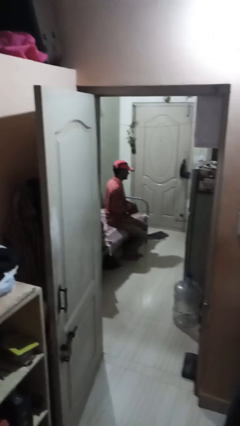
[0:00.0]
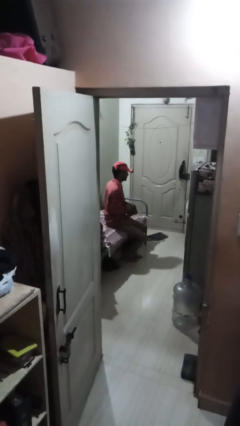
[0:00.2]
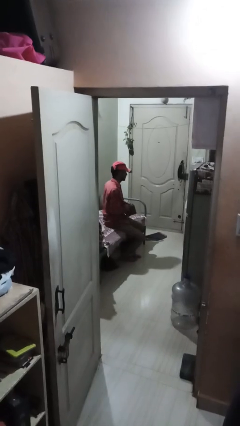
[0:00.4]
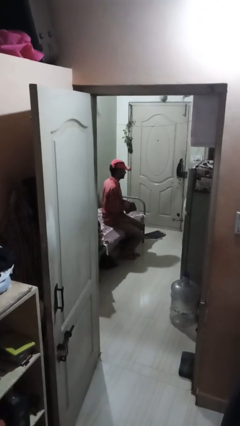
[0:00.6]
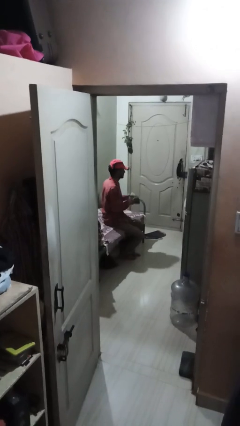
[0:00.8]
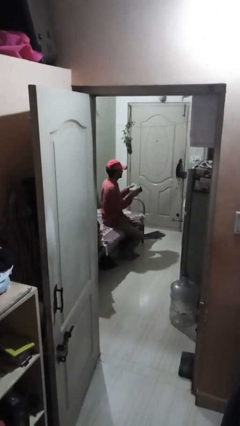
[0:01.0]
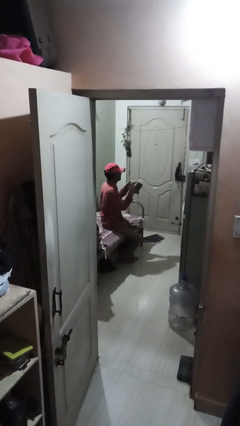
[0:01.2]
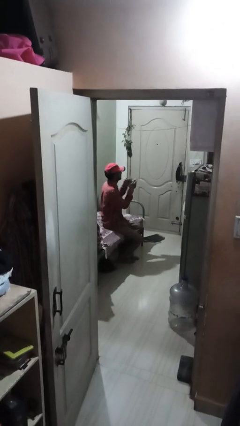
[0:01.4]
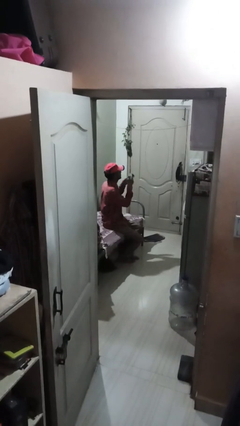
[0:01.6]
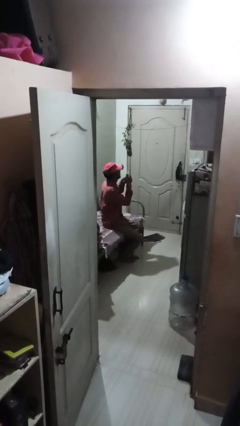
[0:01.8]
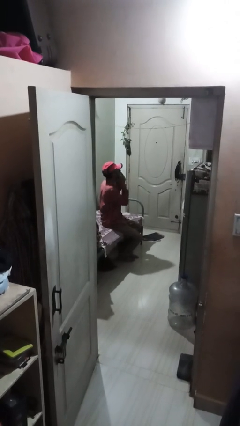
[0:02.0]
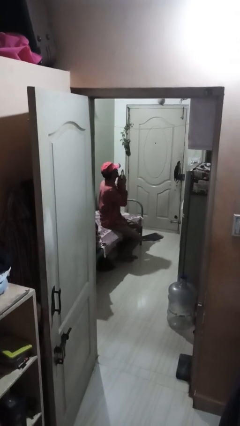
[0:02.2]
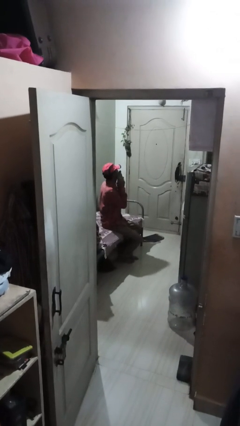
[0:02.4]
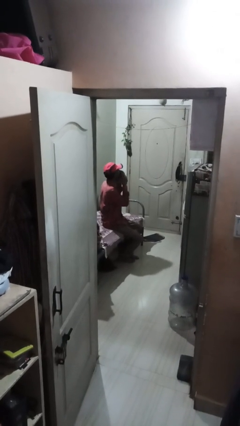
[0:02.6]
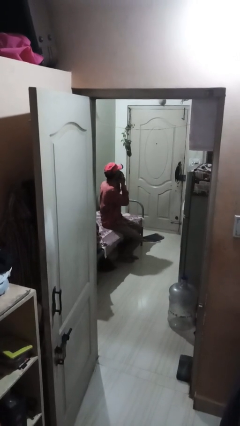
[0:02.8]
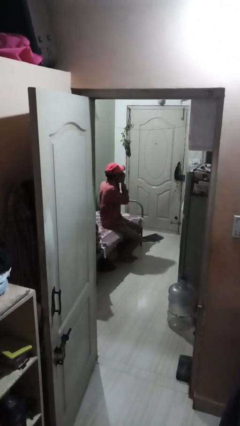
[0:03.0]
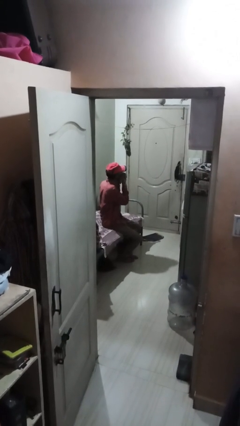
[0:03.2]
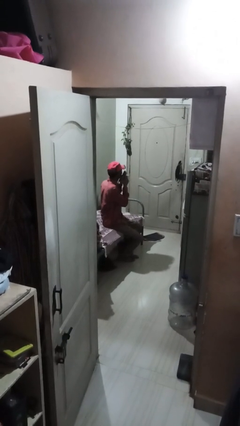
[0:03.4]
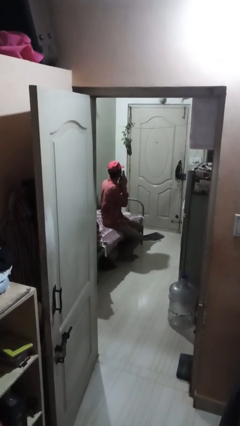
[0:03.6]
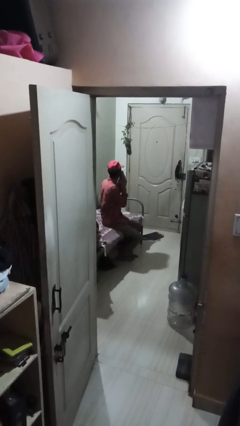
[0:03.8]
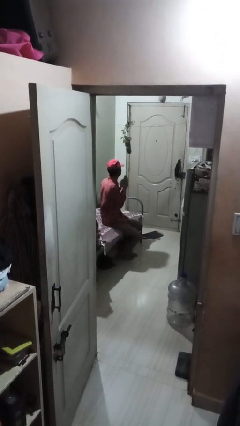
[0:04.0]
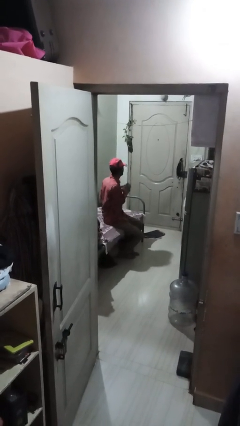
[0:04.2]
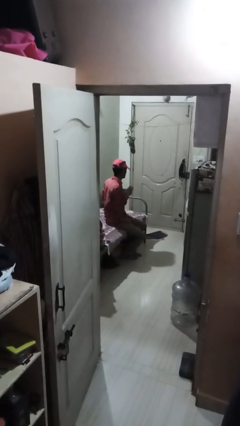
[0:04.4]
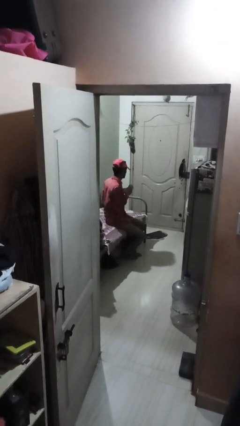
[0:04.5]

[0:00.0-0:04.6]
person wipes mouth with napkin

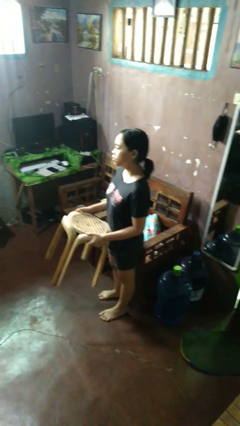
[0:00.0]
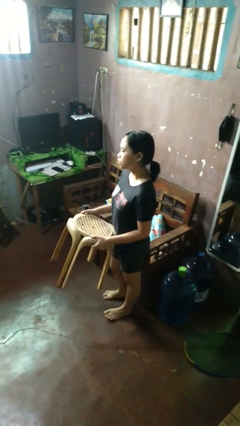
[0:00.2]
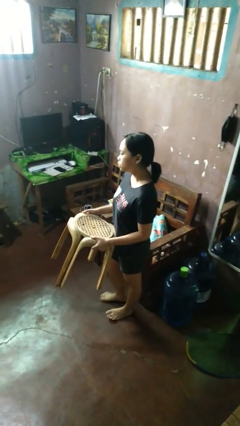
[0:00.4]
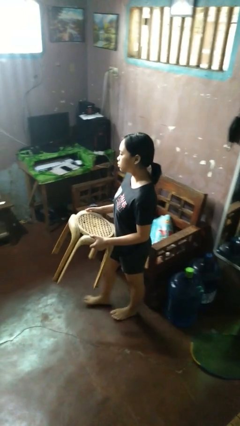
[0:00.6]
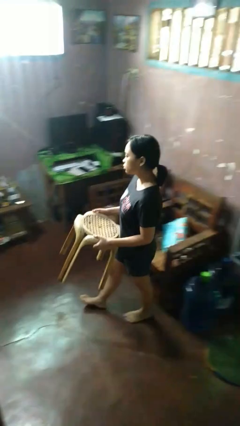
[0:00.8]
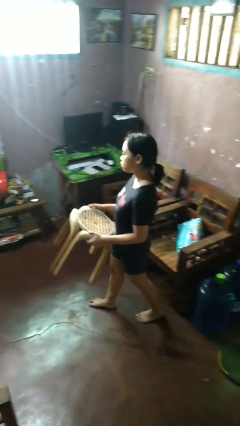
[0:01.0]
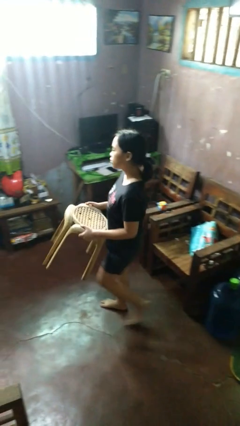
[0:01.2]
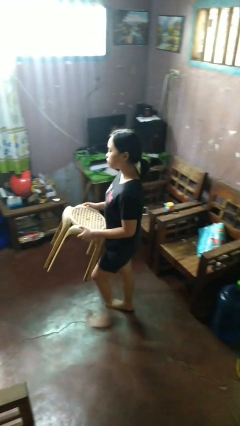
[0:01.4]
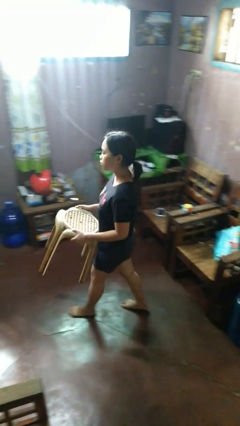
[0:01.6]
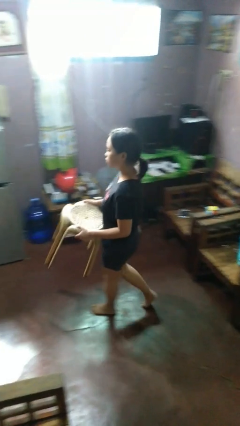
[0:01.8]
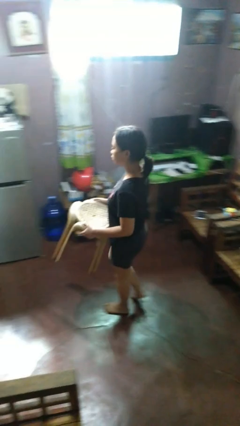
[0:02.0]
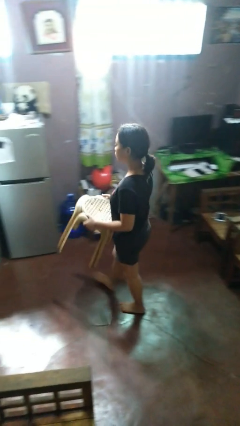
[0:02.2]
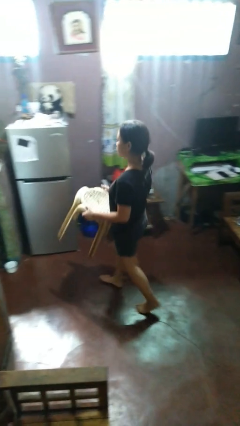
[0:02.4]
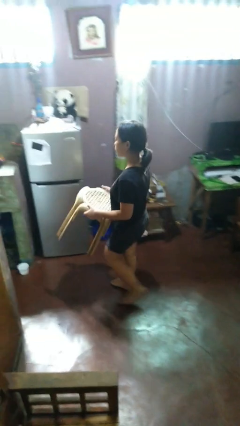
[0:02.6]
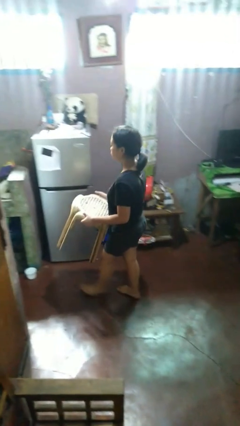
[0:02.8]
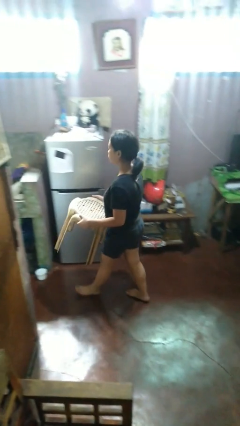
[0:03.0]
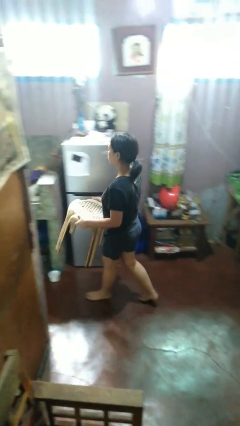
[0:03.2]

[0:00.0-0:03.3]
person carries furniture

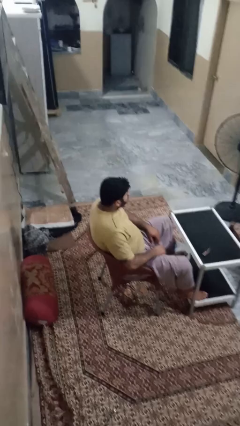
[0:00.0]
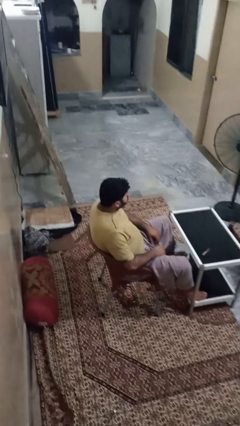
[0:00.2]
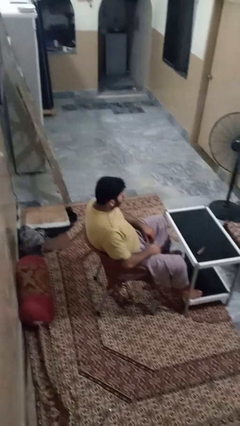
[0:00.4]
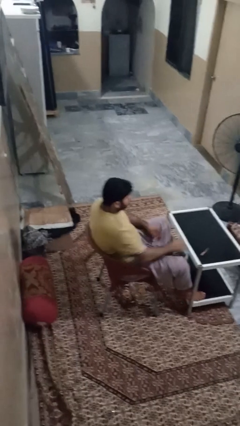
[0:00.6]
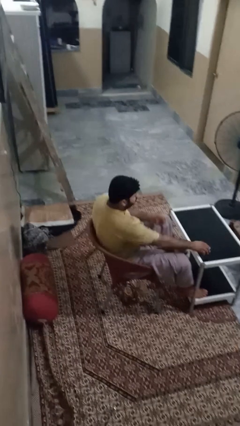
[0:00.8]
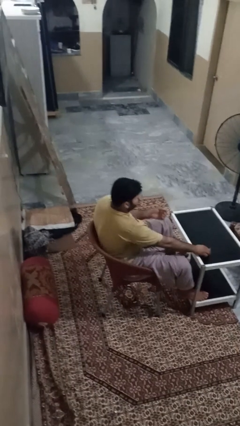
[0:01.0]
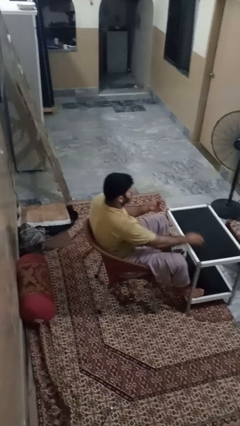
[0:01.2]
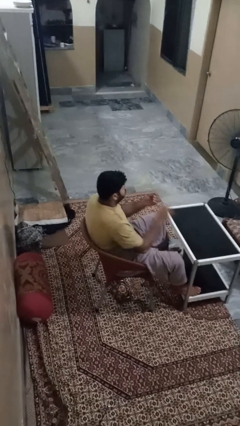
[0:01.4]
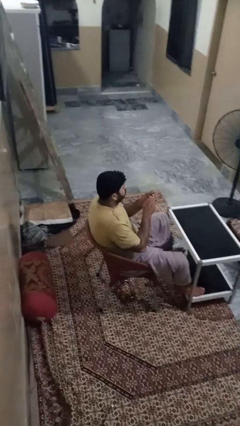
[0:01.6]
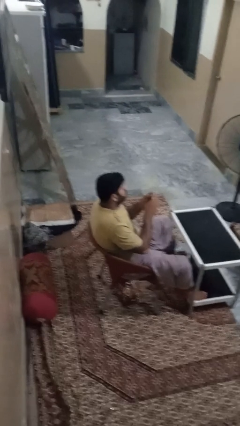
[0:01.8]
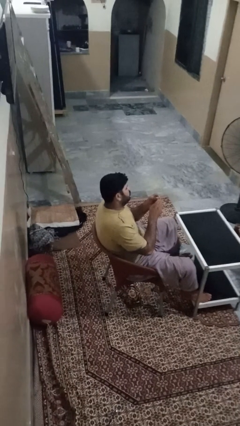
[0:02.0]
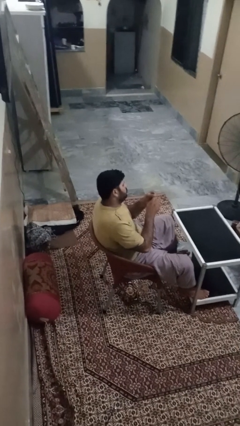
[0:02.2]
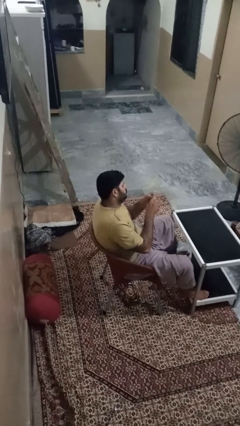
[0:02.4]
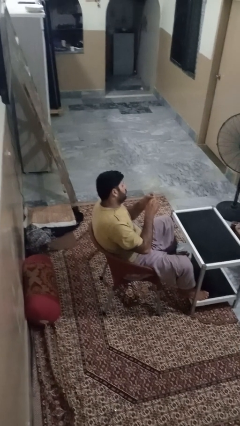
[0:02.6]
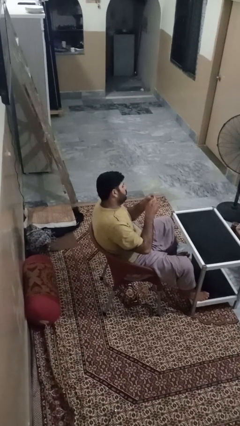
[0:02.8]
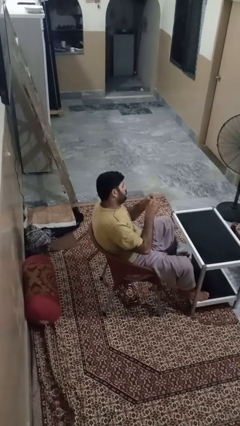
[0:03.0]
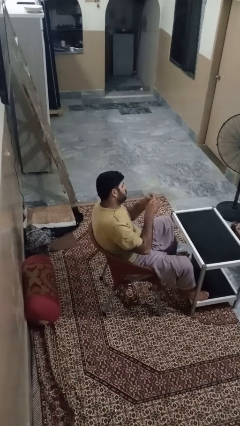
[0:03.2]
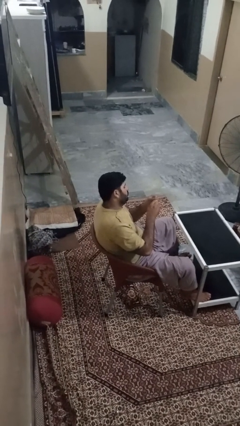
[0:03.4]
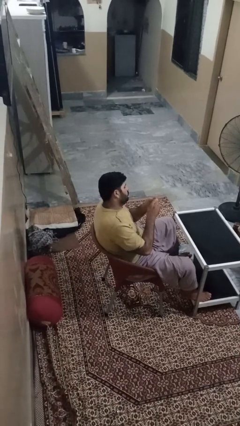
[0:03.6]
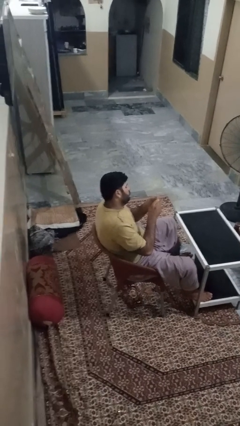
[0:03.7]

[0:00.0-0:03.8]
person files fingernails

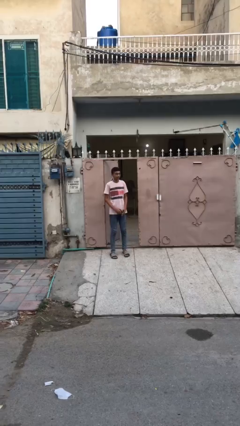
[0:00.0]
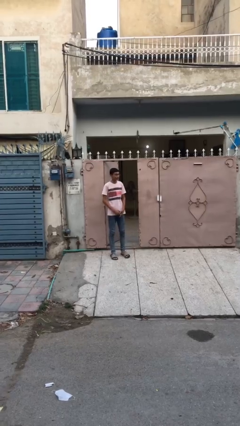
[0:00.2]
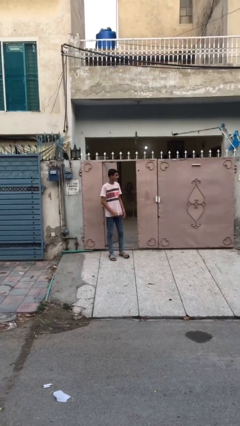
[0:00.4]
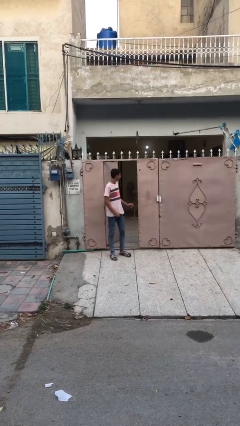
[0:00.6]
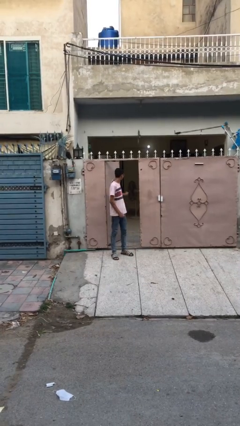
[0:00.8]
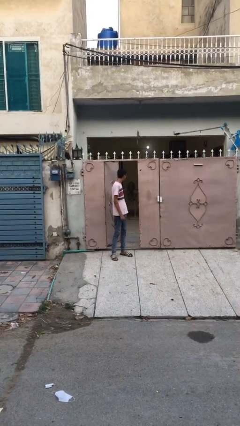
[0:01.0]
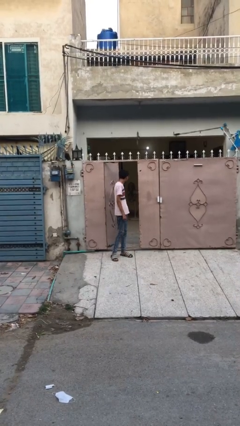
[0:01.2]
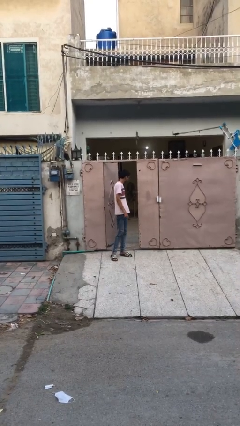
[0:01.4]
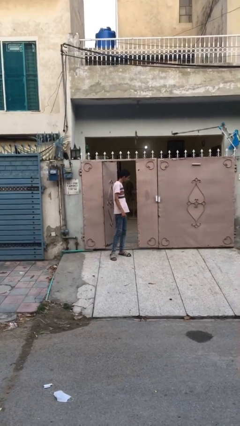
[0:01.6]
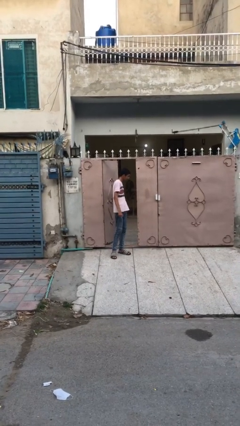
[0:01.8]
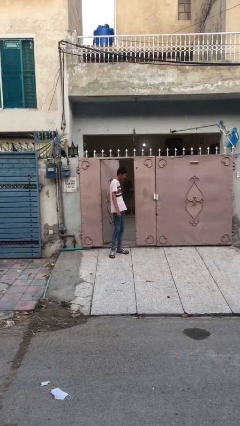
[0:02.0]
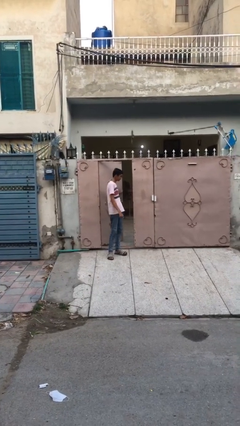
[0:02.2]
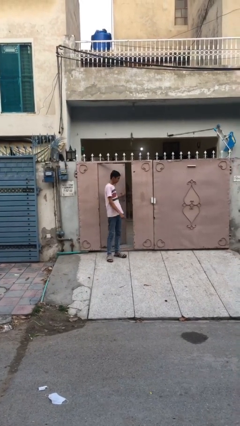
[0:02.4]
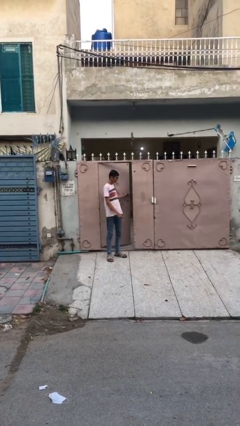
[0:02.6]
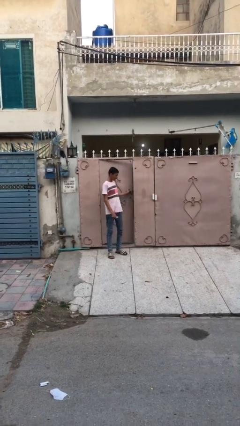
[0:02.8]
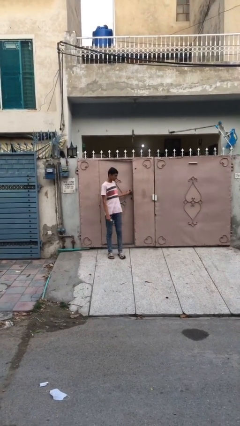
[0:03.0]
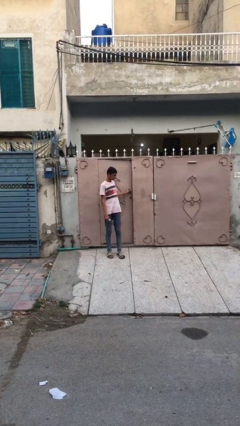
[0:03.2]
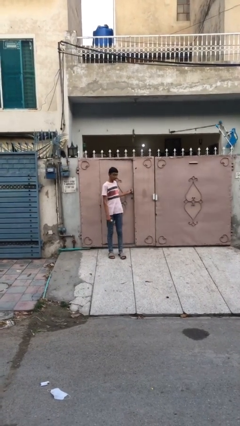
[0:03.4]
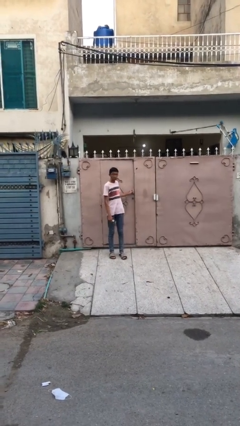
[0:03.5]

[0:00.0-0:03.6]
person closes facility door

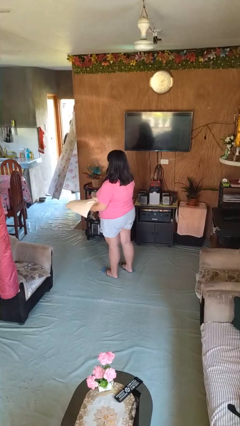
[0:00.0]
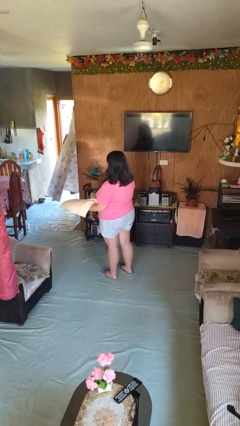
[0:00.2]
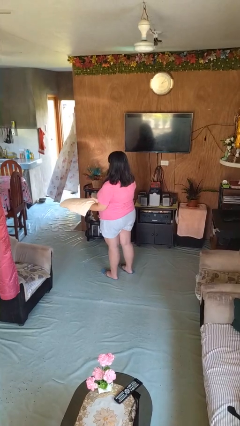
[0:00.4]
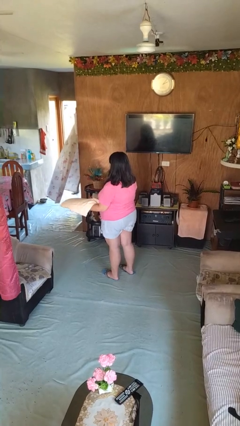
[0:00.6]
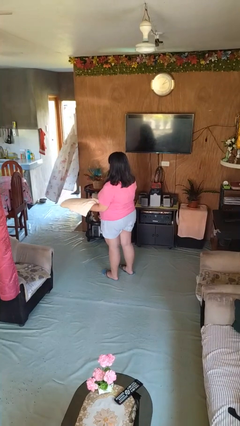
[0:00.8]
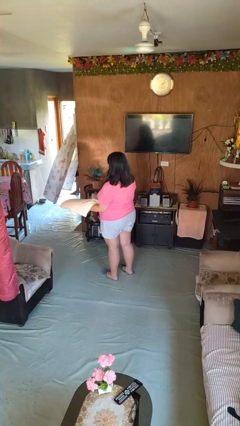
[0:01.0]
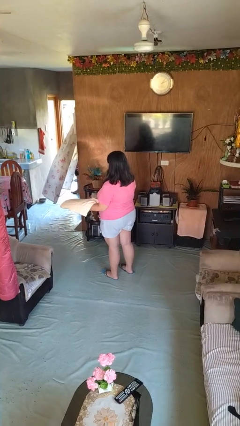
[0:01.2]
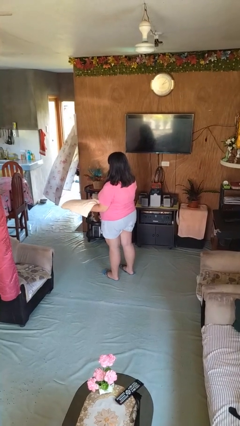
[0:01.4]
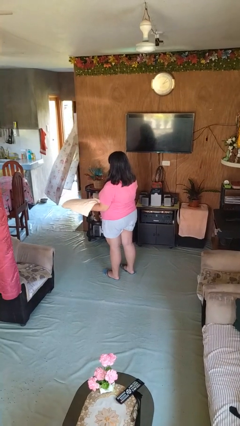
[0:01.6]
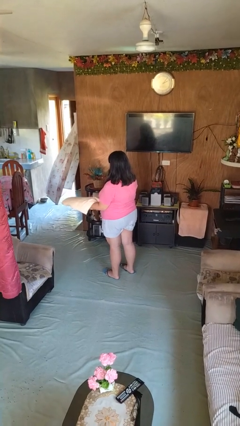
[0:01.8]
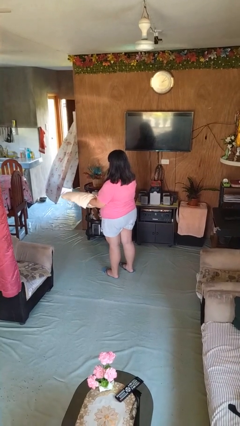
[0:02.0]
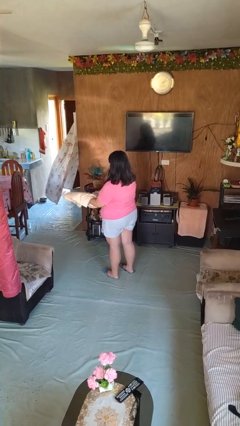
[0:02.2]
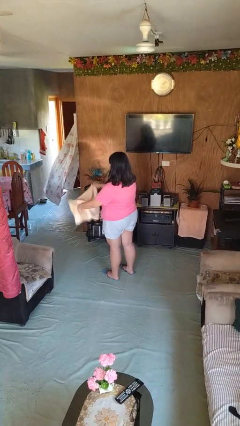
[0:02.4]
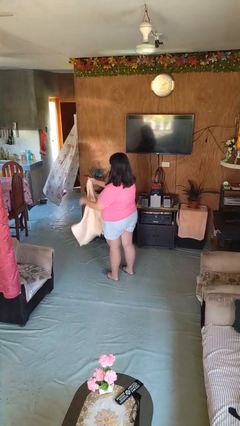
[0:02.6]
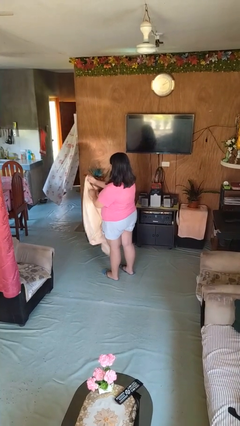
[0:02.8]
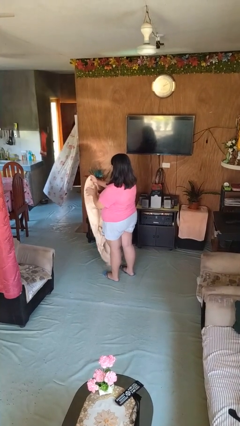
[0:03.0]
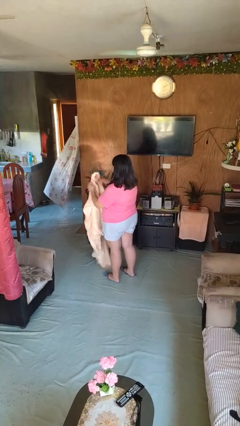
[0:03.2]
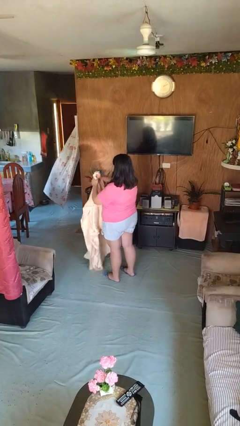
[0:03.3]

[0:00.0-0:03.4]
person unfolds blanket
